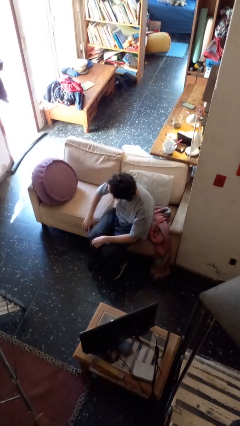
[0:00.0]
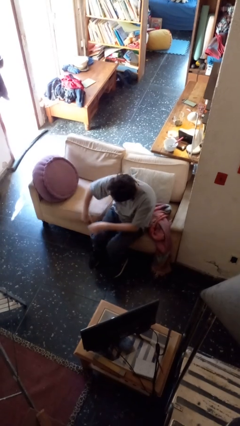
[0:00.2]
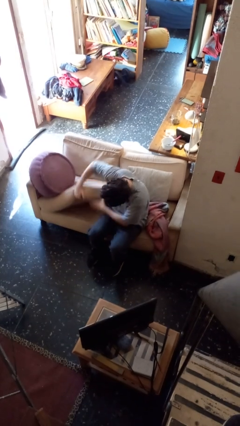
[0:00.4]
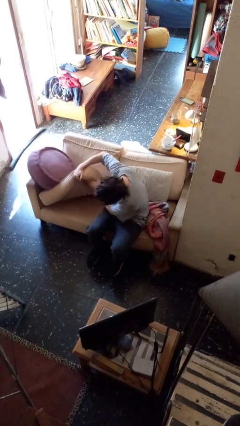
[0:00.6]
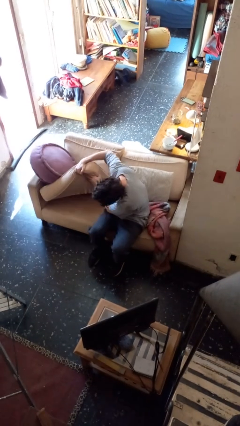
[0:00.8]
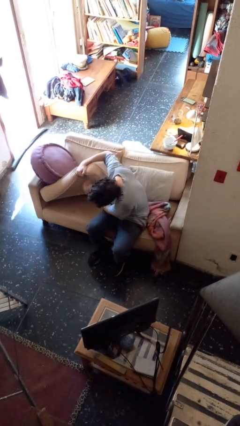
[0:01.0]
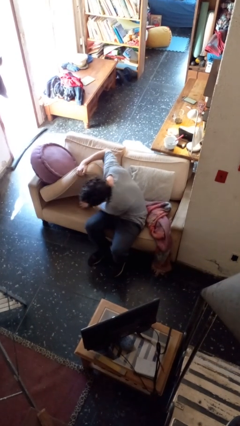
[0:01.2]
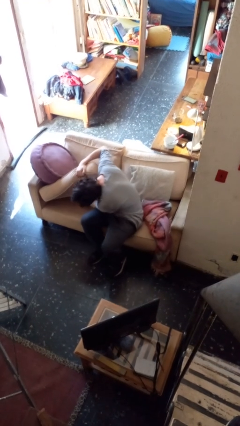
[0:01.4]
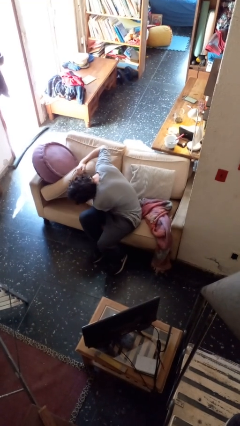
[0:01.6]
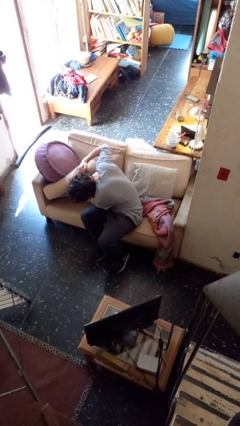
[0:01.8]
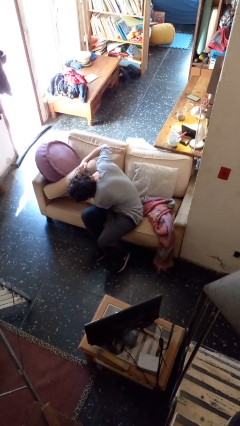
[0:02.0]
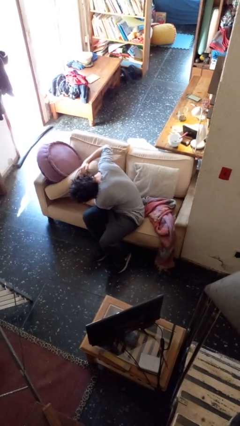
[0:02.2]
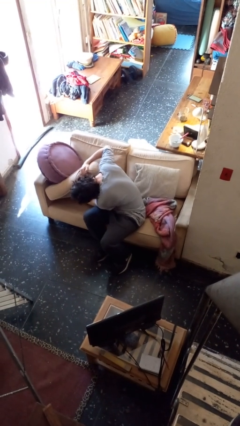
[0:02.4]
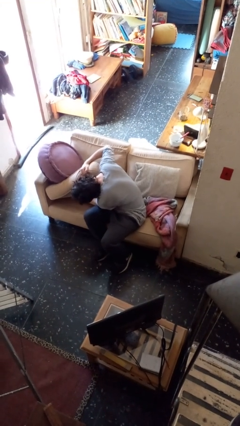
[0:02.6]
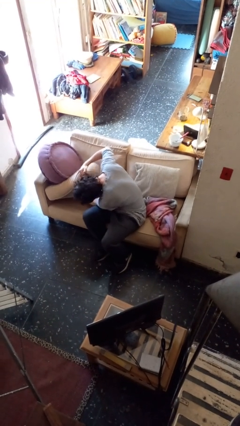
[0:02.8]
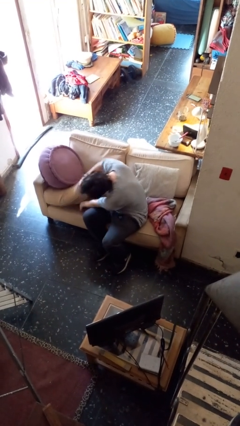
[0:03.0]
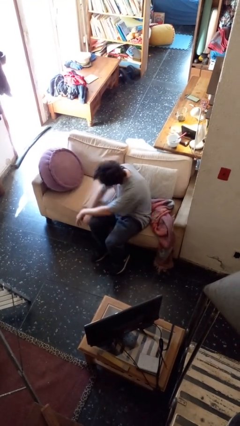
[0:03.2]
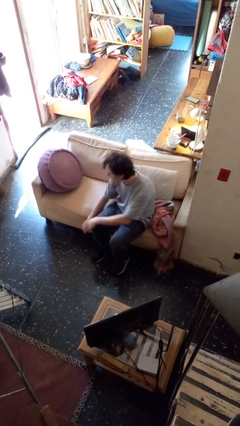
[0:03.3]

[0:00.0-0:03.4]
person searches in couch

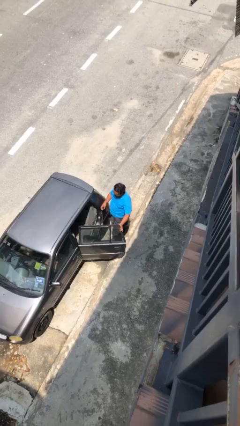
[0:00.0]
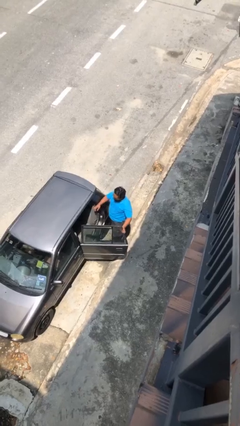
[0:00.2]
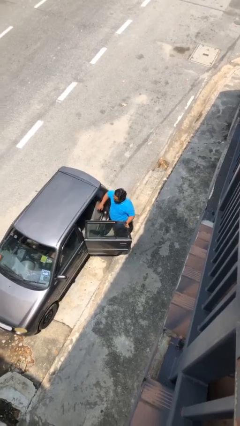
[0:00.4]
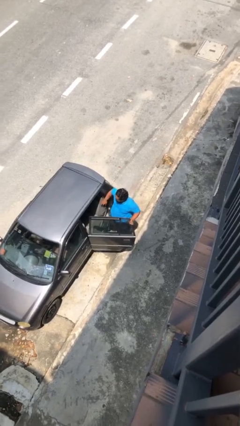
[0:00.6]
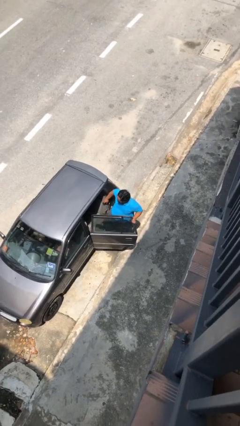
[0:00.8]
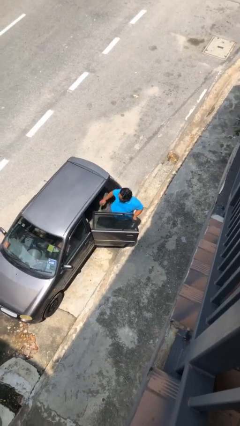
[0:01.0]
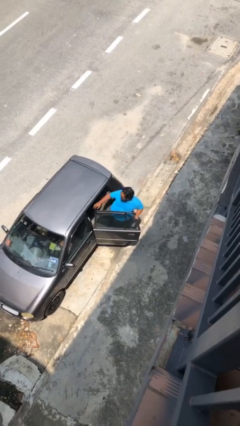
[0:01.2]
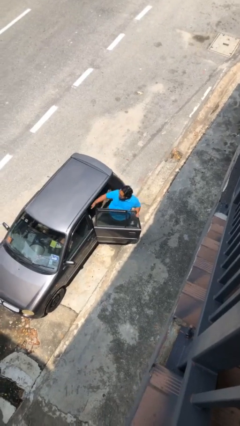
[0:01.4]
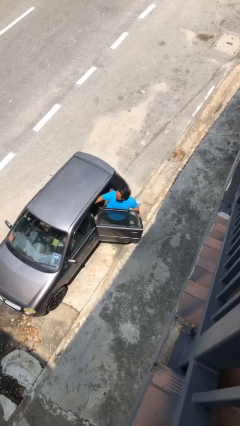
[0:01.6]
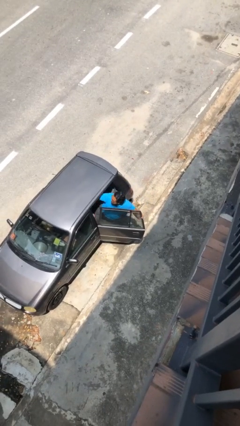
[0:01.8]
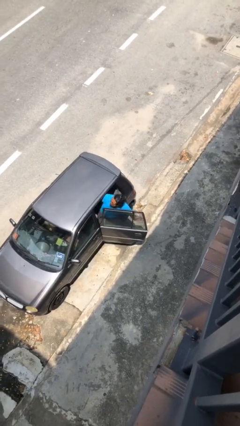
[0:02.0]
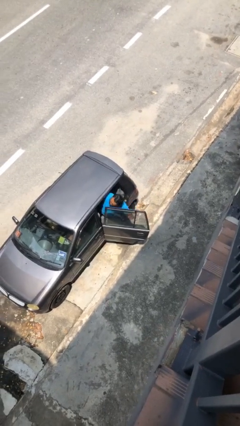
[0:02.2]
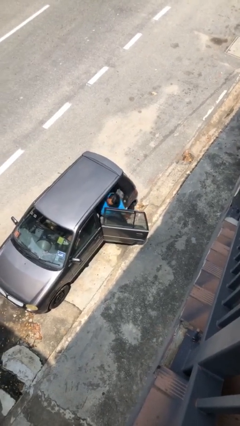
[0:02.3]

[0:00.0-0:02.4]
person enters car

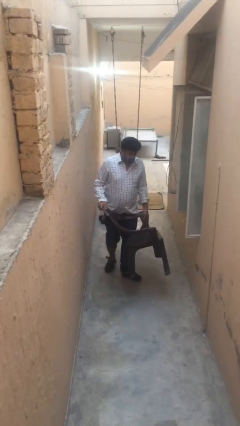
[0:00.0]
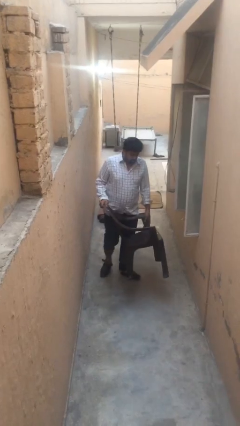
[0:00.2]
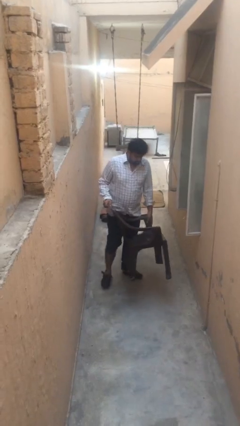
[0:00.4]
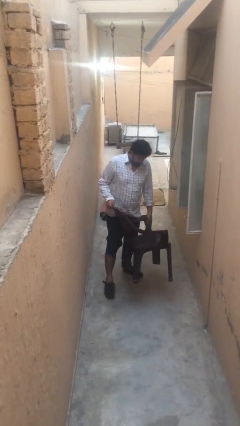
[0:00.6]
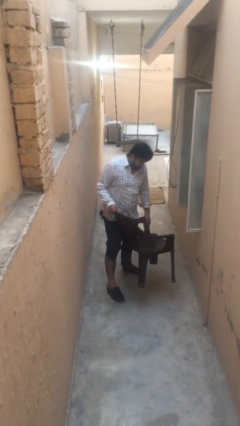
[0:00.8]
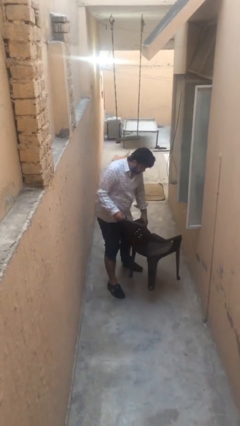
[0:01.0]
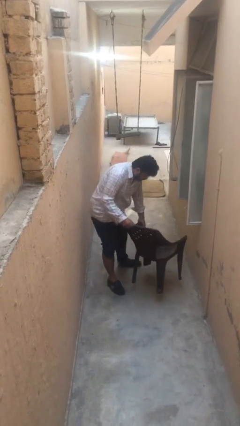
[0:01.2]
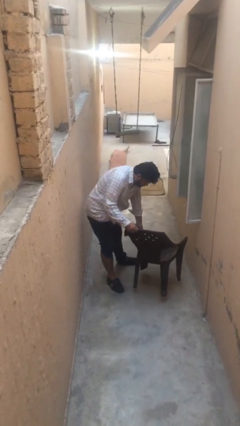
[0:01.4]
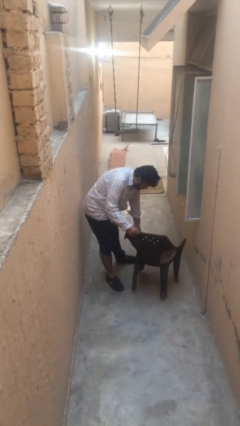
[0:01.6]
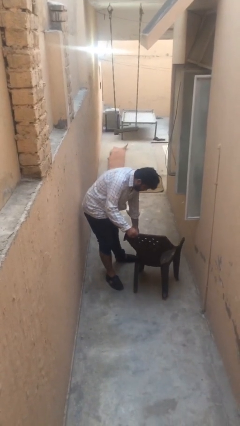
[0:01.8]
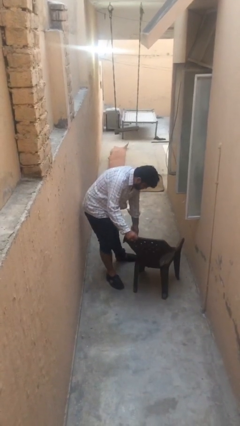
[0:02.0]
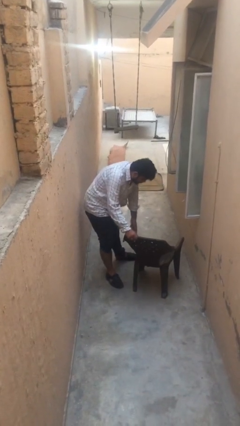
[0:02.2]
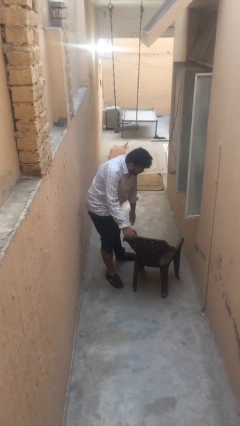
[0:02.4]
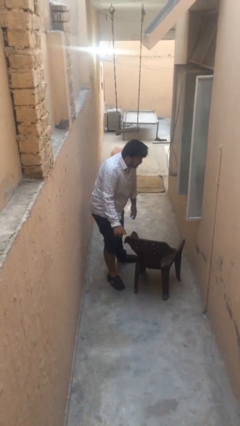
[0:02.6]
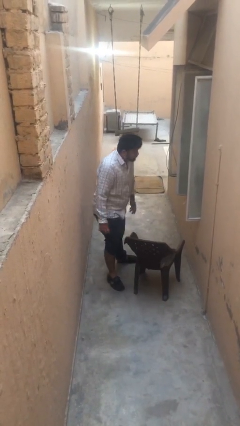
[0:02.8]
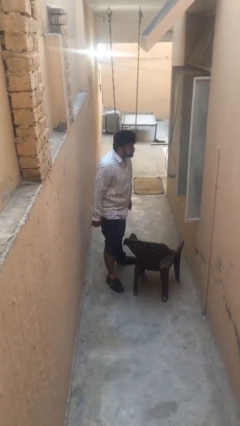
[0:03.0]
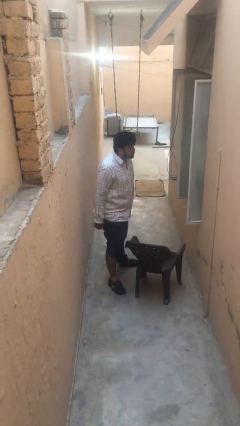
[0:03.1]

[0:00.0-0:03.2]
person puts down object on floor

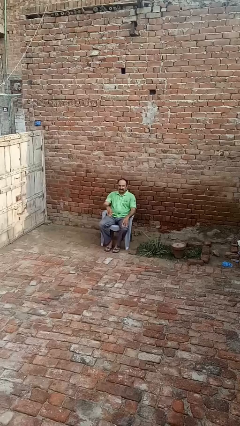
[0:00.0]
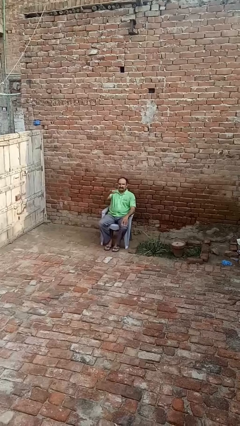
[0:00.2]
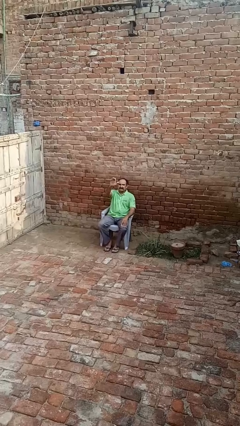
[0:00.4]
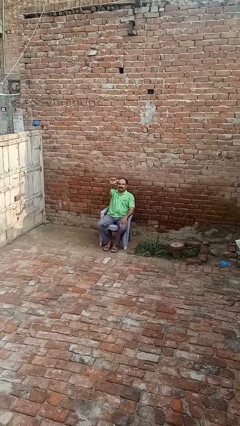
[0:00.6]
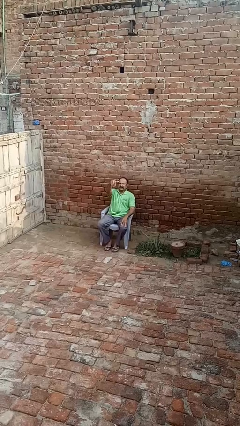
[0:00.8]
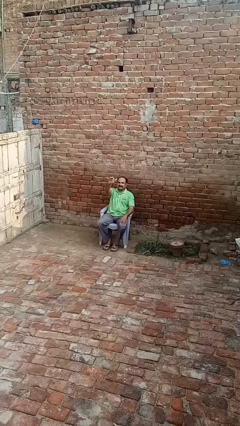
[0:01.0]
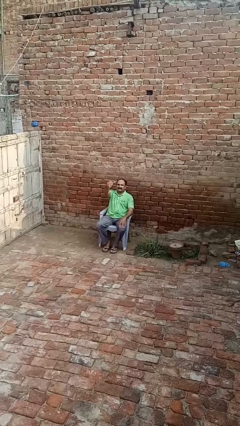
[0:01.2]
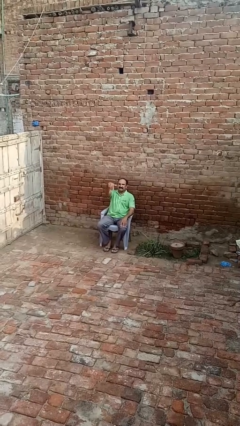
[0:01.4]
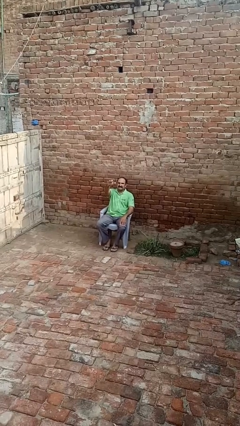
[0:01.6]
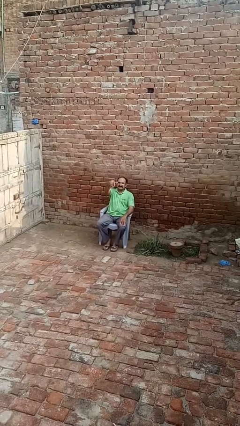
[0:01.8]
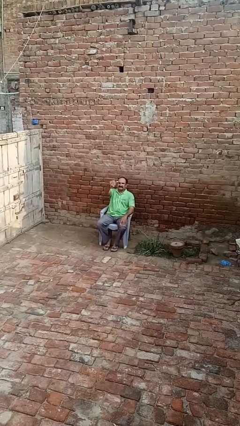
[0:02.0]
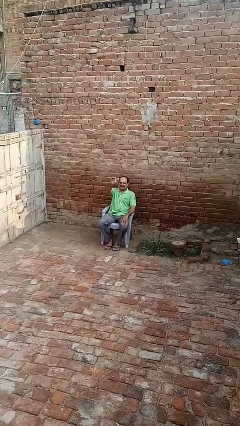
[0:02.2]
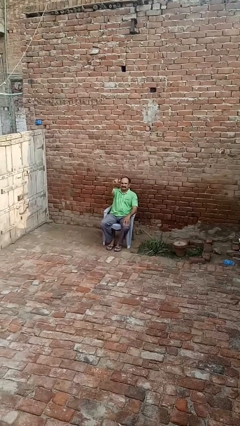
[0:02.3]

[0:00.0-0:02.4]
person gestures come here

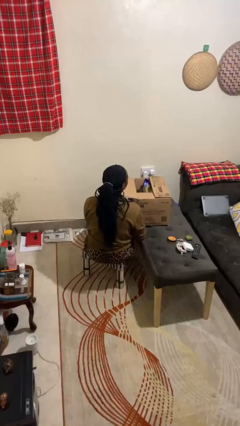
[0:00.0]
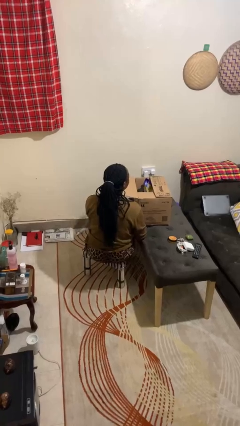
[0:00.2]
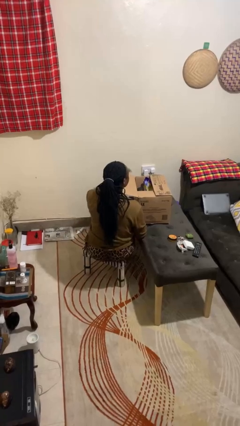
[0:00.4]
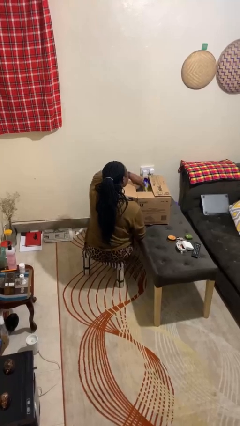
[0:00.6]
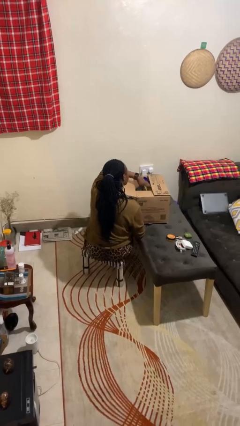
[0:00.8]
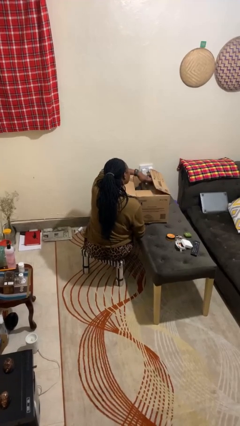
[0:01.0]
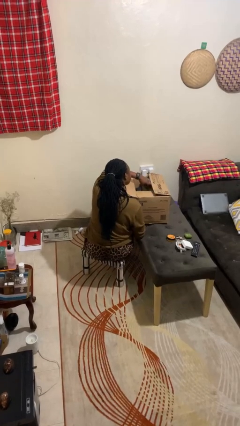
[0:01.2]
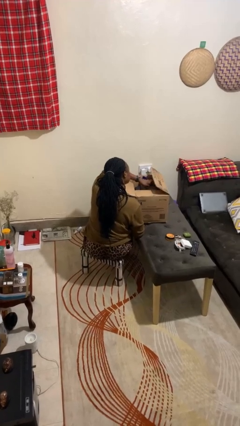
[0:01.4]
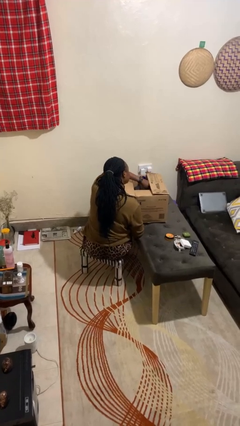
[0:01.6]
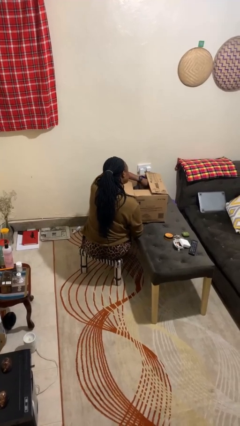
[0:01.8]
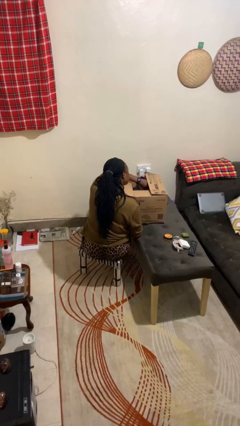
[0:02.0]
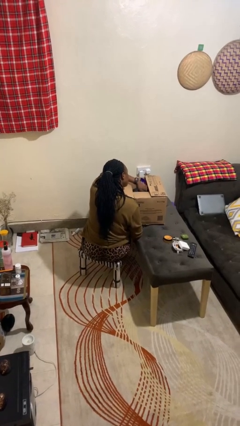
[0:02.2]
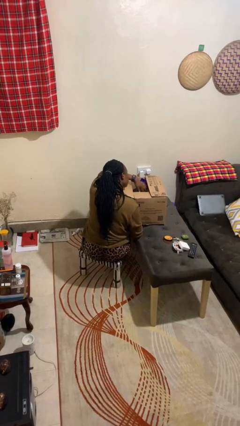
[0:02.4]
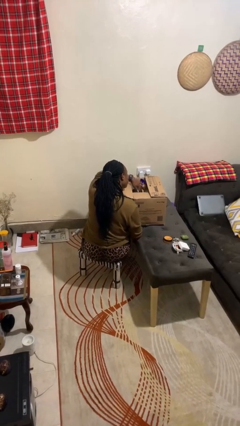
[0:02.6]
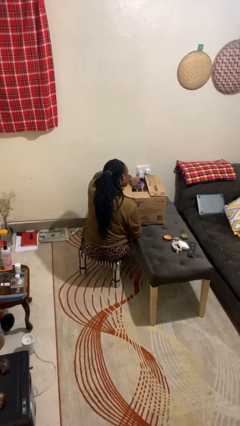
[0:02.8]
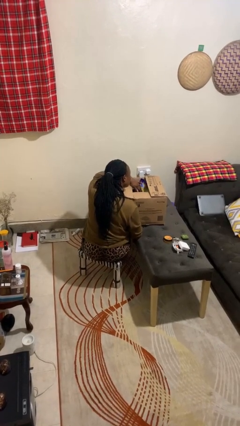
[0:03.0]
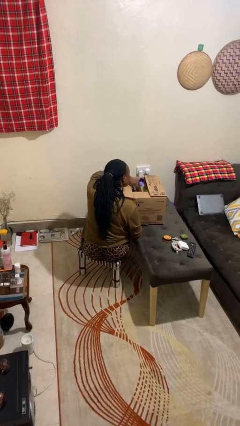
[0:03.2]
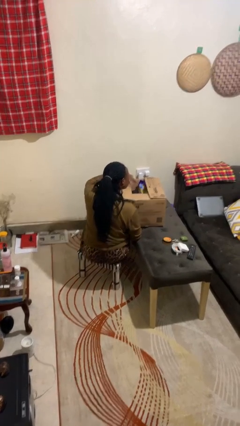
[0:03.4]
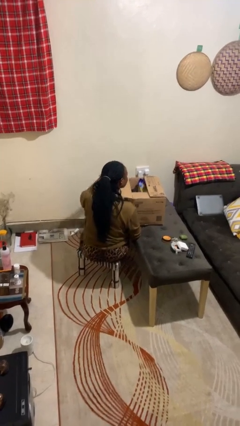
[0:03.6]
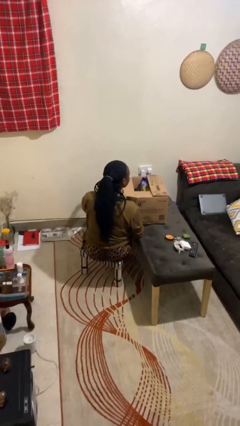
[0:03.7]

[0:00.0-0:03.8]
person searches in box

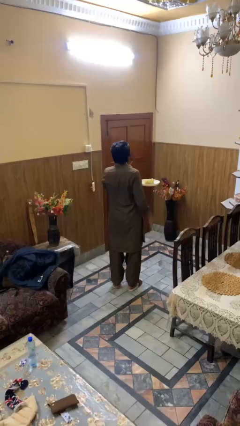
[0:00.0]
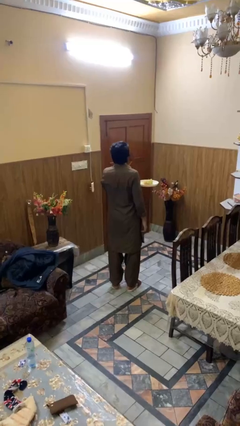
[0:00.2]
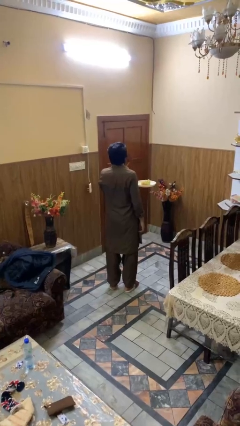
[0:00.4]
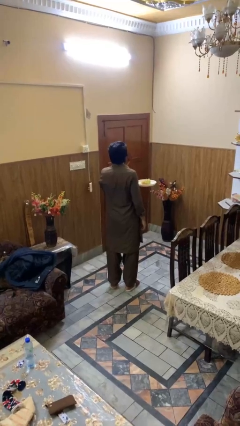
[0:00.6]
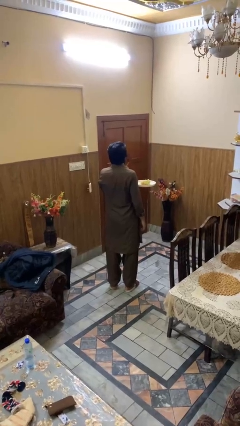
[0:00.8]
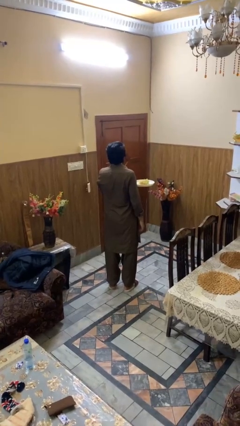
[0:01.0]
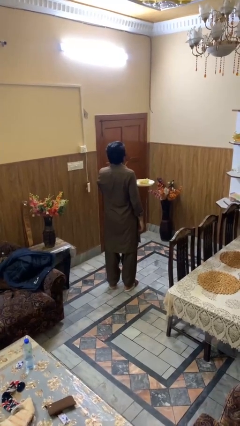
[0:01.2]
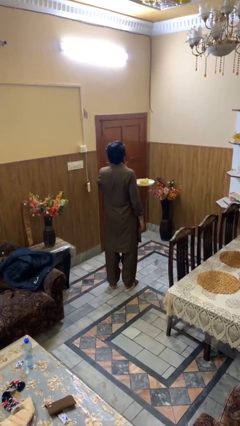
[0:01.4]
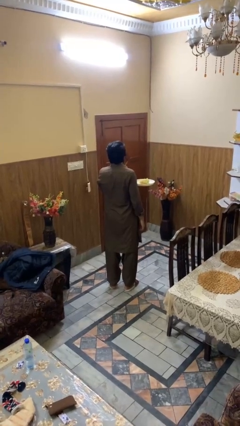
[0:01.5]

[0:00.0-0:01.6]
person eats with hands

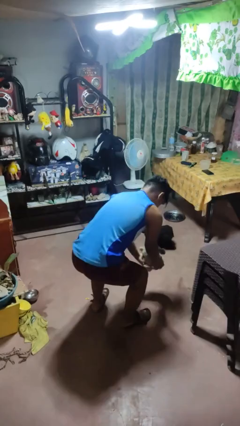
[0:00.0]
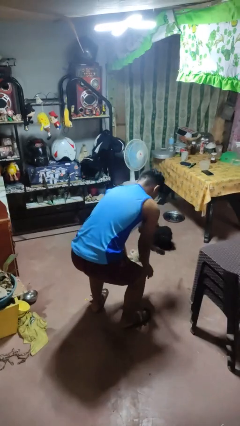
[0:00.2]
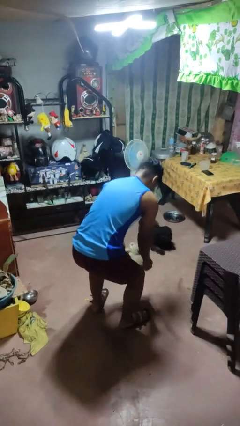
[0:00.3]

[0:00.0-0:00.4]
person catches dropped object
